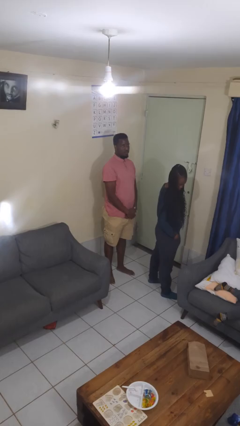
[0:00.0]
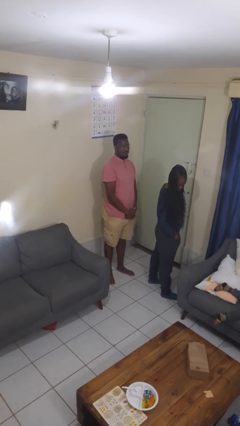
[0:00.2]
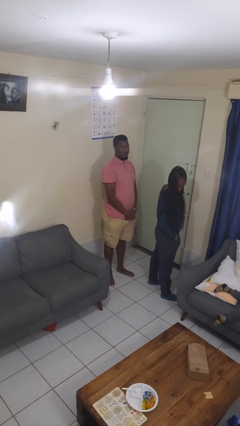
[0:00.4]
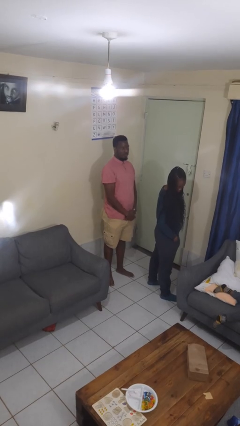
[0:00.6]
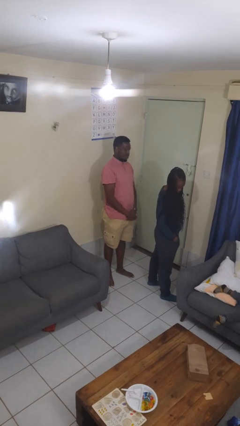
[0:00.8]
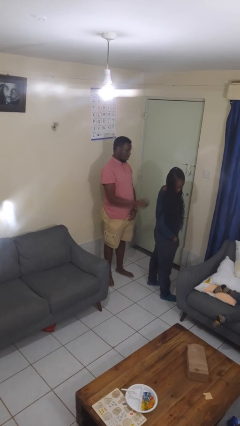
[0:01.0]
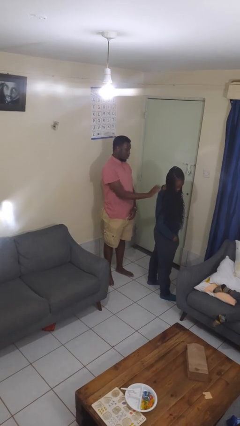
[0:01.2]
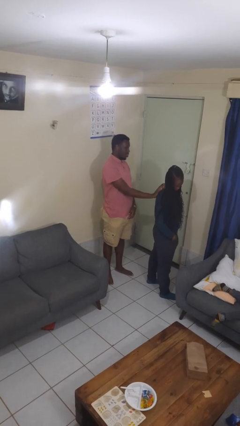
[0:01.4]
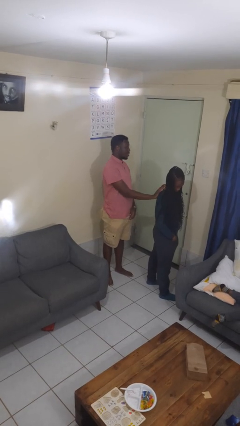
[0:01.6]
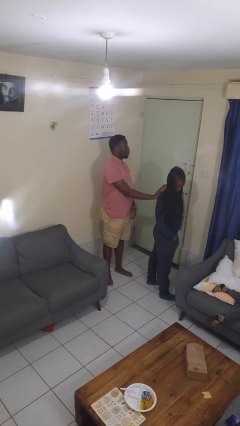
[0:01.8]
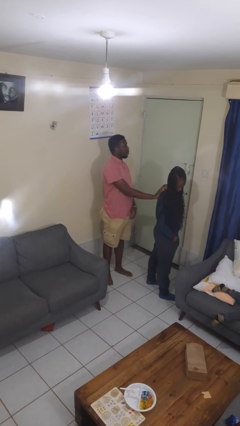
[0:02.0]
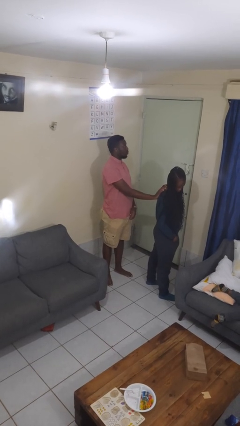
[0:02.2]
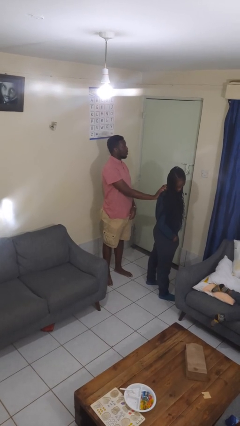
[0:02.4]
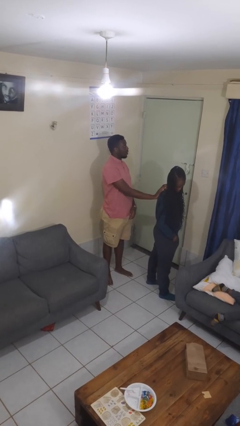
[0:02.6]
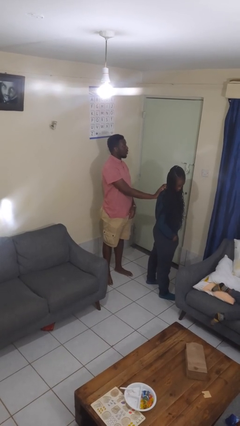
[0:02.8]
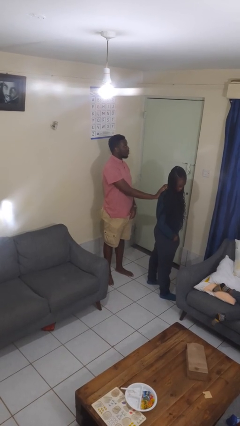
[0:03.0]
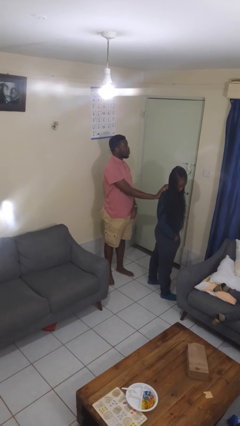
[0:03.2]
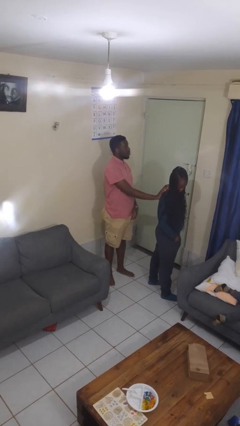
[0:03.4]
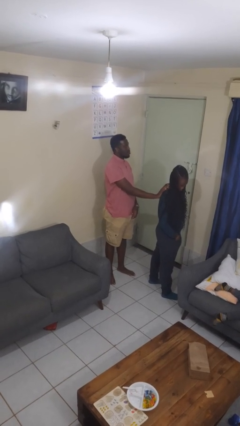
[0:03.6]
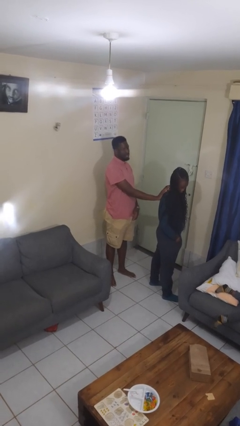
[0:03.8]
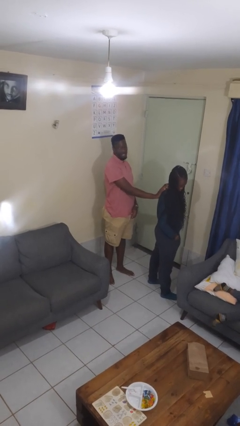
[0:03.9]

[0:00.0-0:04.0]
person touches back of person

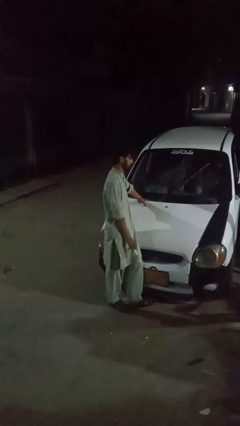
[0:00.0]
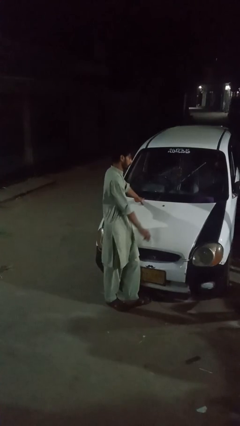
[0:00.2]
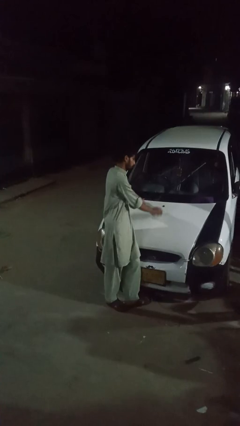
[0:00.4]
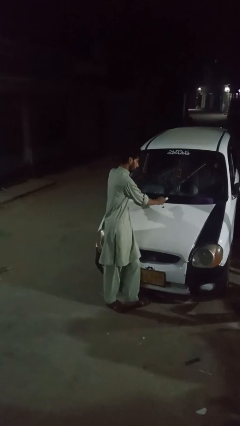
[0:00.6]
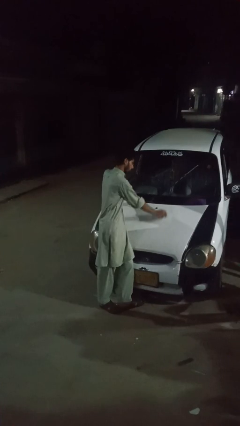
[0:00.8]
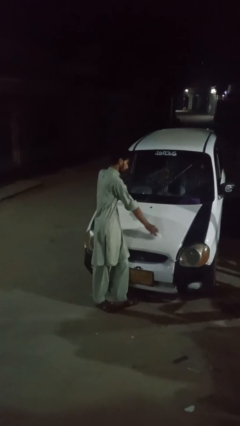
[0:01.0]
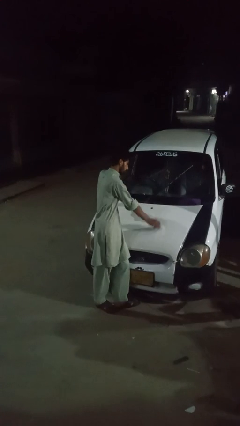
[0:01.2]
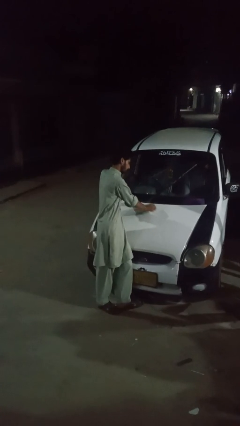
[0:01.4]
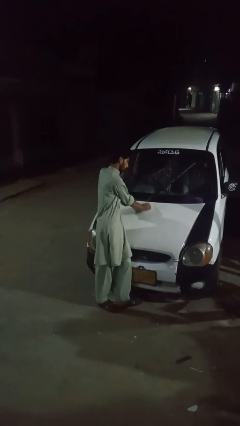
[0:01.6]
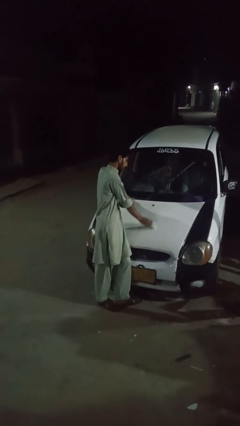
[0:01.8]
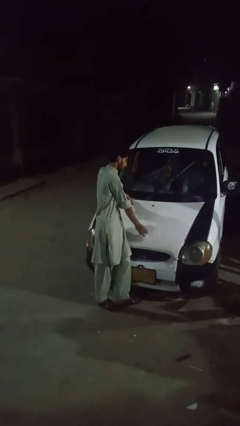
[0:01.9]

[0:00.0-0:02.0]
person polishes car with rag

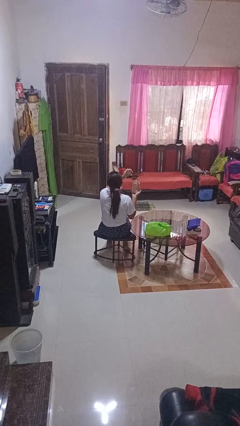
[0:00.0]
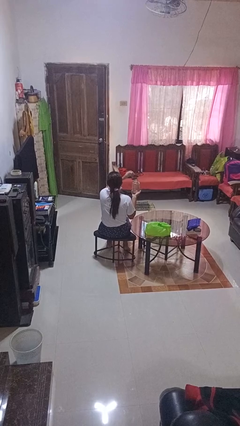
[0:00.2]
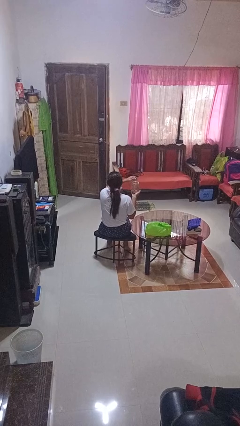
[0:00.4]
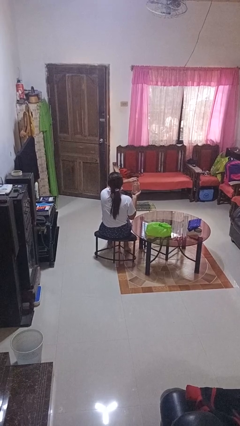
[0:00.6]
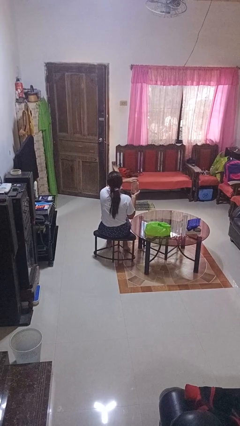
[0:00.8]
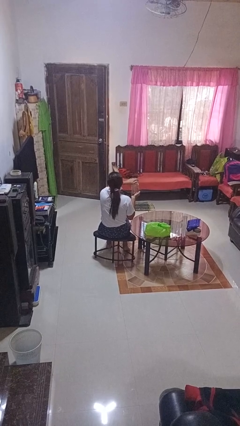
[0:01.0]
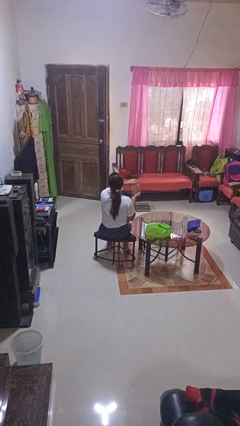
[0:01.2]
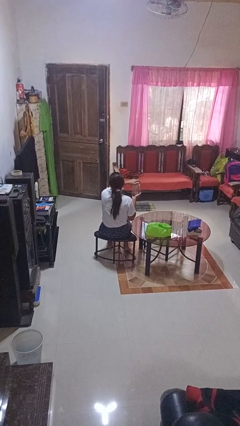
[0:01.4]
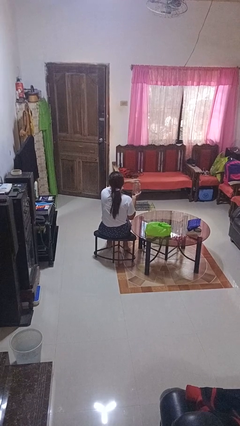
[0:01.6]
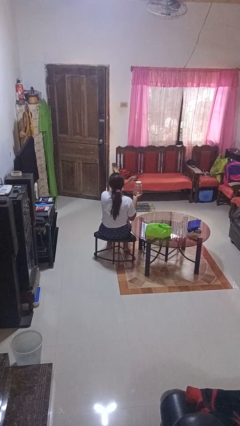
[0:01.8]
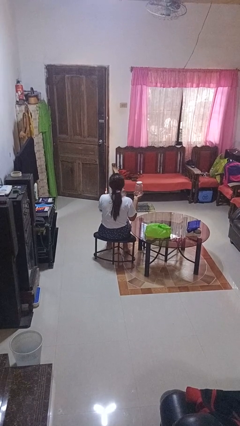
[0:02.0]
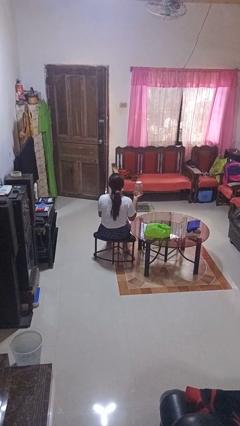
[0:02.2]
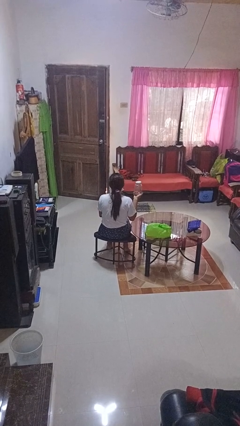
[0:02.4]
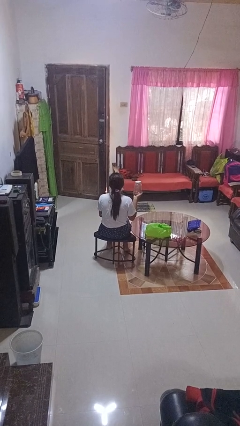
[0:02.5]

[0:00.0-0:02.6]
person closes jar

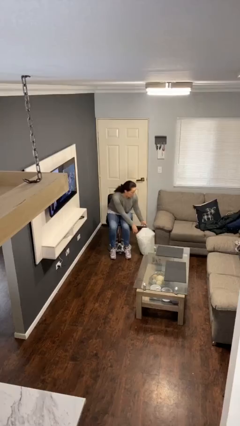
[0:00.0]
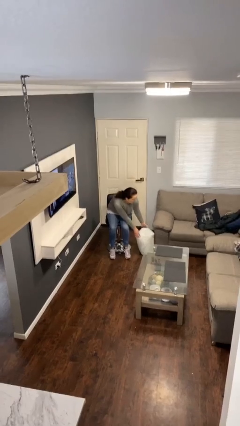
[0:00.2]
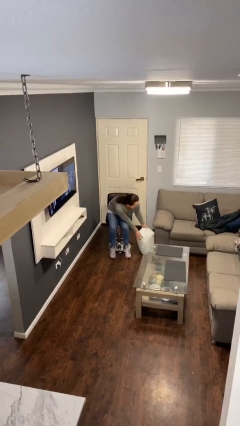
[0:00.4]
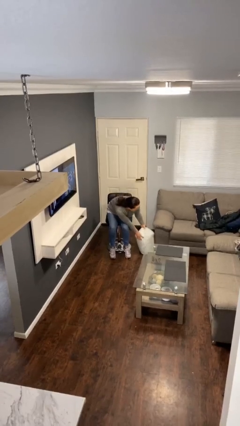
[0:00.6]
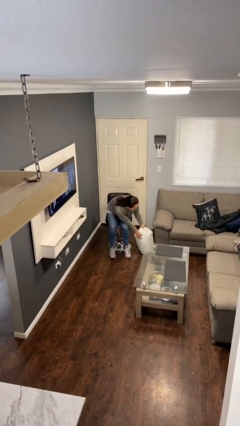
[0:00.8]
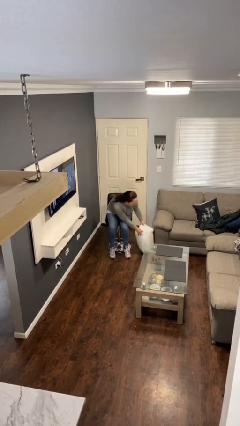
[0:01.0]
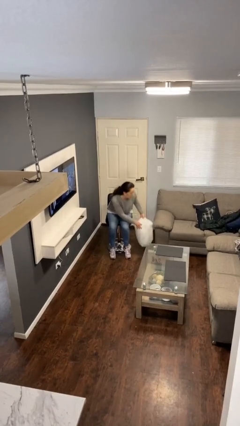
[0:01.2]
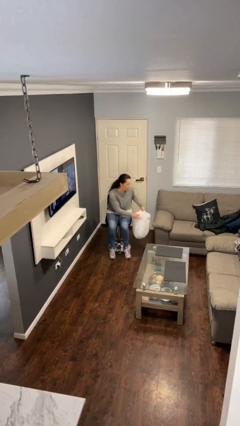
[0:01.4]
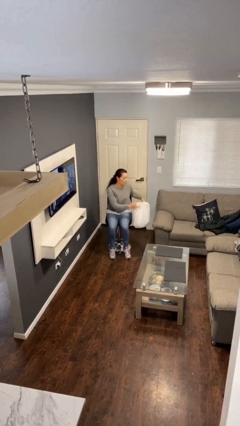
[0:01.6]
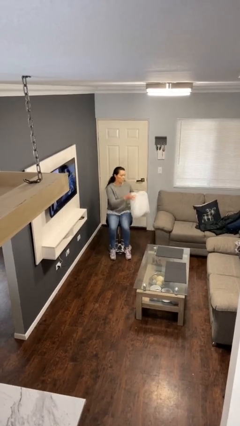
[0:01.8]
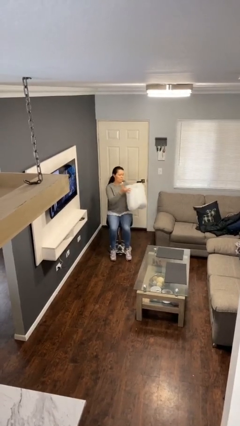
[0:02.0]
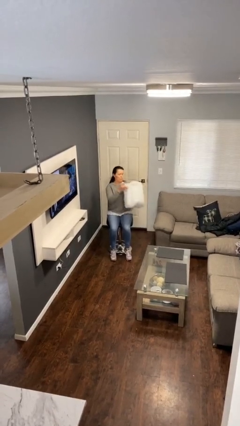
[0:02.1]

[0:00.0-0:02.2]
person picks up object from floor

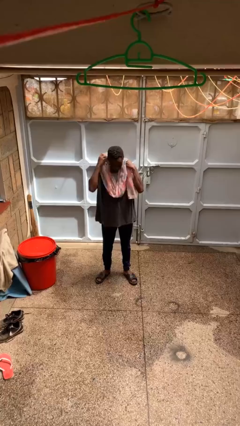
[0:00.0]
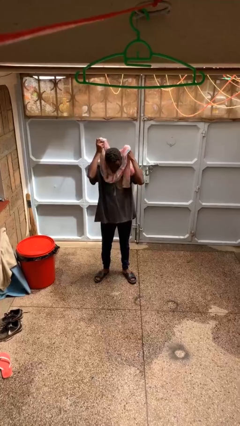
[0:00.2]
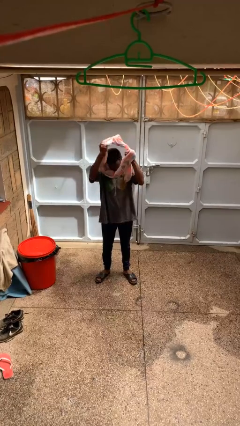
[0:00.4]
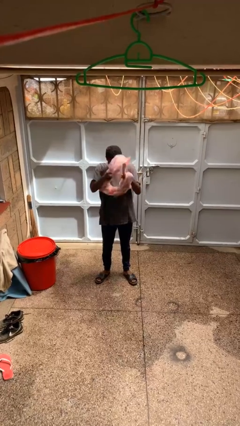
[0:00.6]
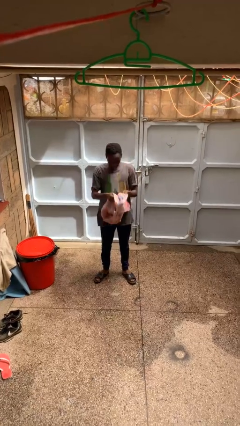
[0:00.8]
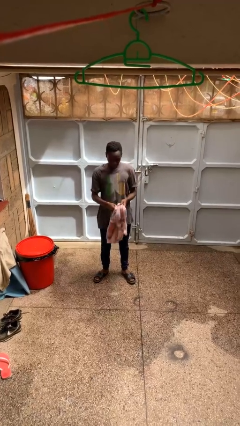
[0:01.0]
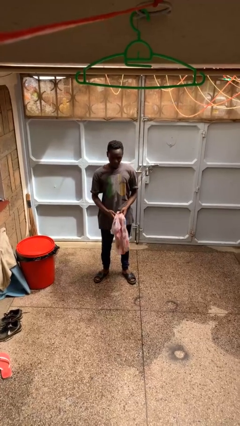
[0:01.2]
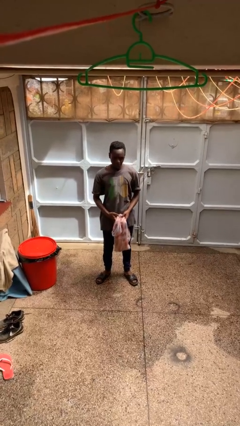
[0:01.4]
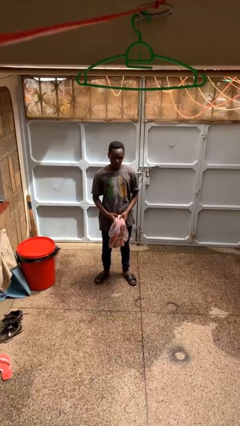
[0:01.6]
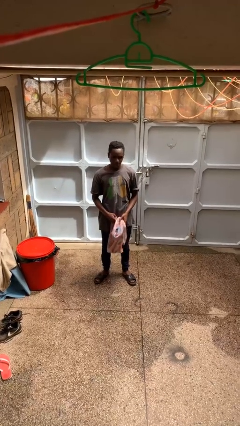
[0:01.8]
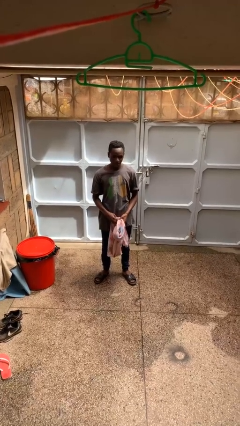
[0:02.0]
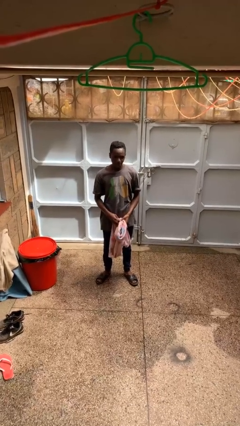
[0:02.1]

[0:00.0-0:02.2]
person takes off scarf

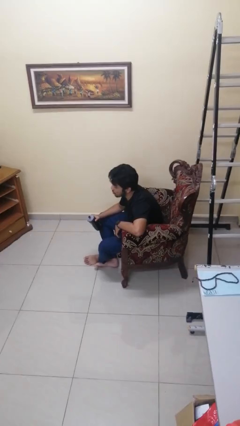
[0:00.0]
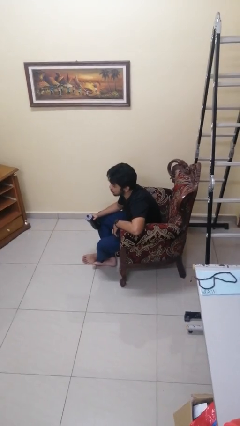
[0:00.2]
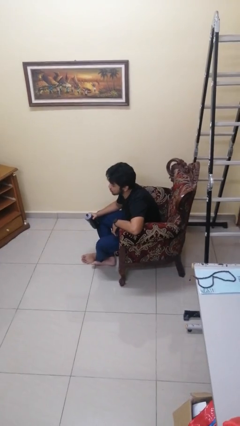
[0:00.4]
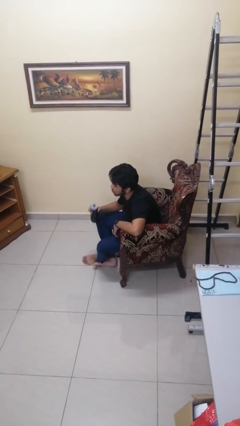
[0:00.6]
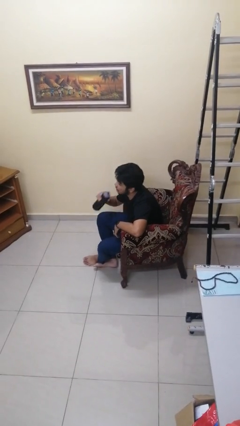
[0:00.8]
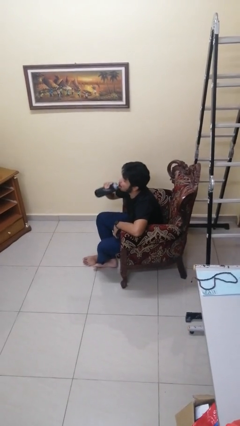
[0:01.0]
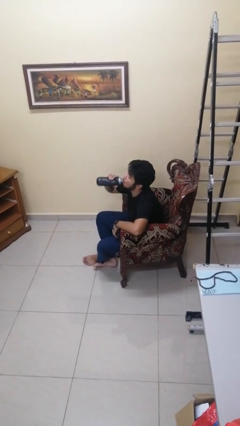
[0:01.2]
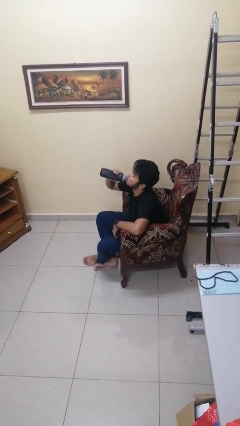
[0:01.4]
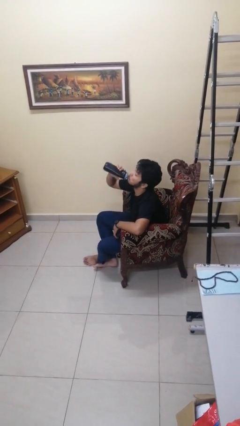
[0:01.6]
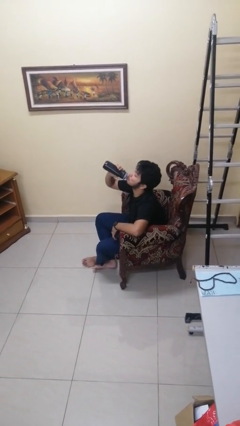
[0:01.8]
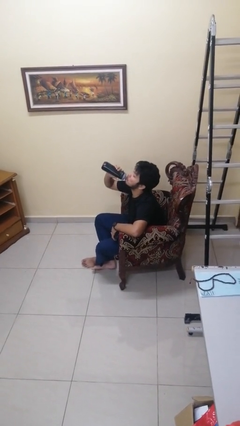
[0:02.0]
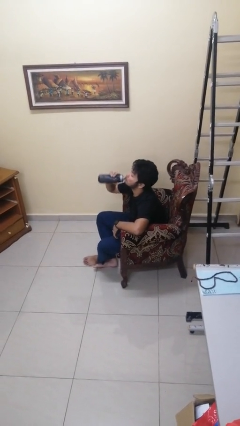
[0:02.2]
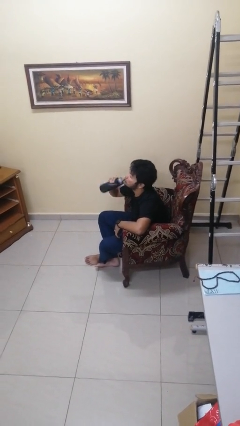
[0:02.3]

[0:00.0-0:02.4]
person drinks from bottle

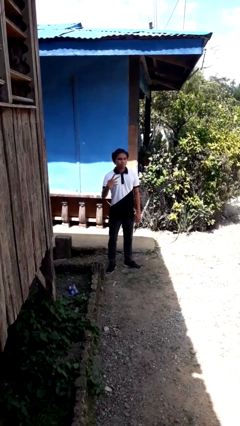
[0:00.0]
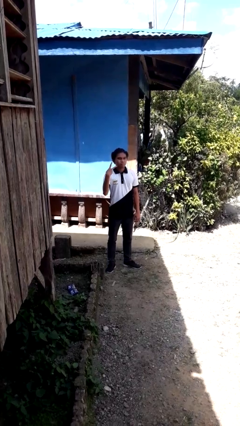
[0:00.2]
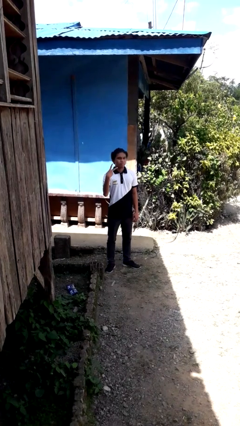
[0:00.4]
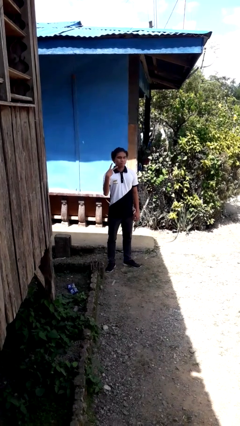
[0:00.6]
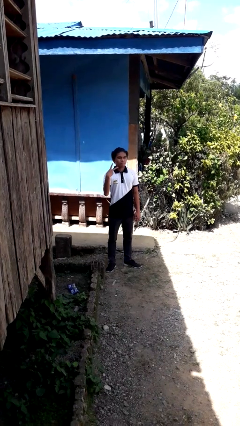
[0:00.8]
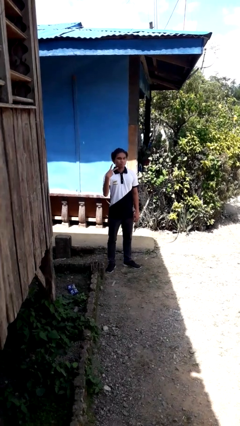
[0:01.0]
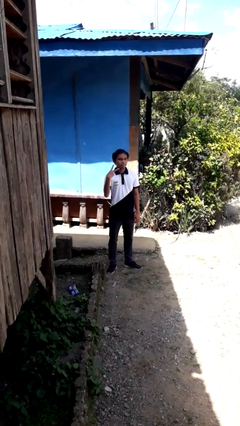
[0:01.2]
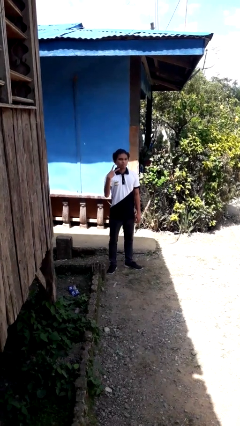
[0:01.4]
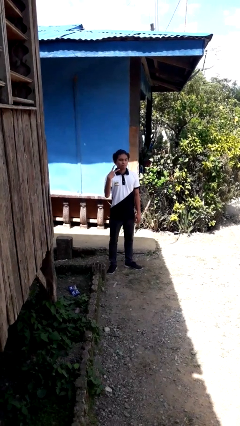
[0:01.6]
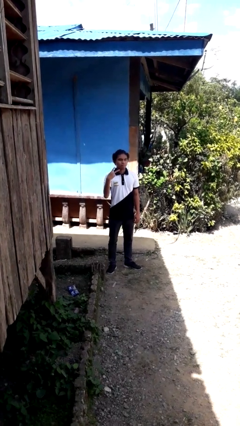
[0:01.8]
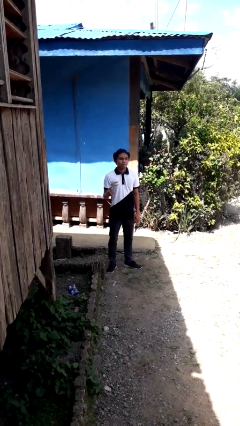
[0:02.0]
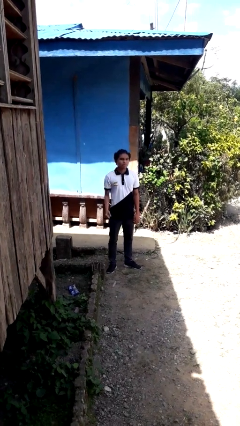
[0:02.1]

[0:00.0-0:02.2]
person gestures peace
